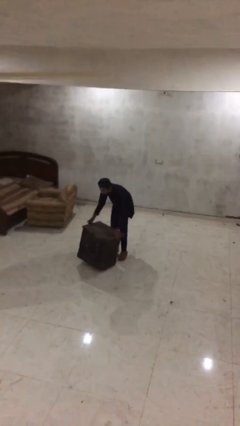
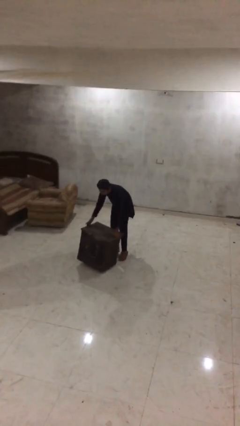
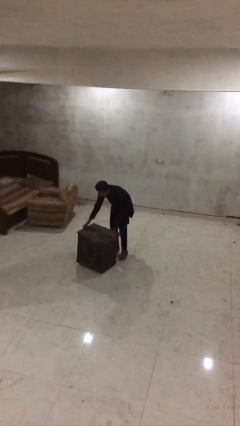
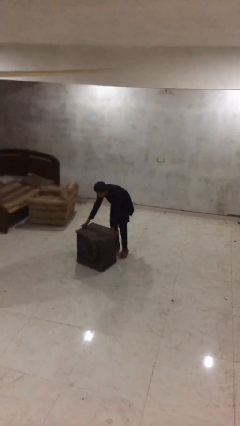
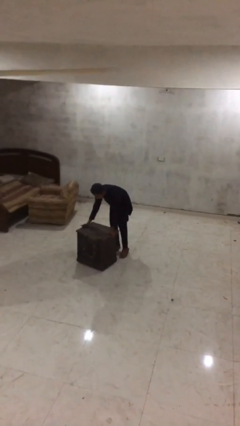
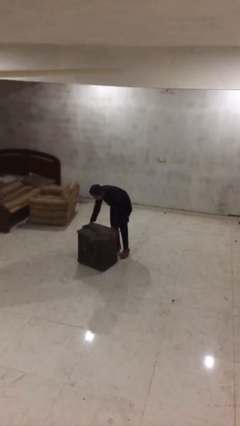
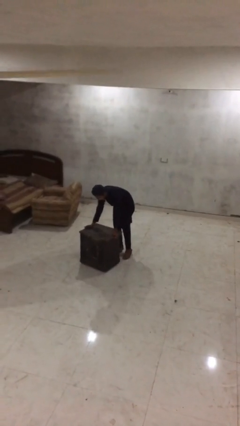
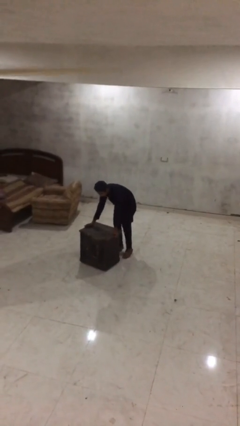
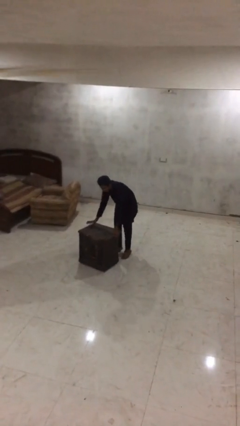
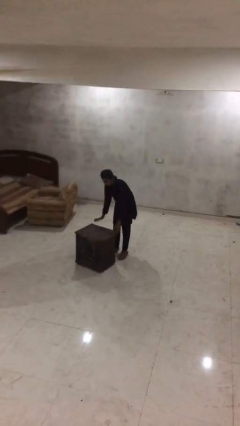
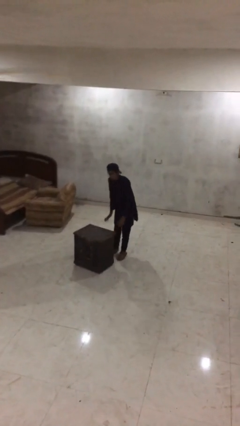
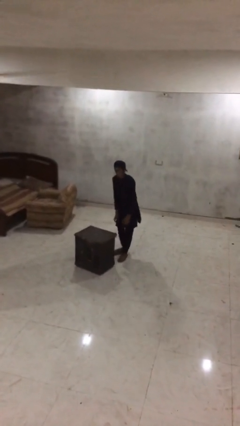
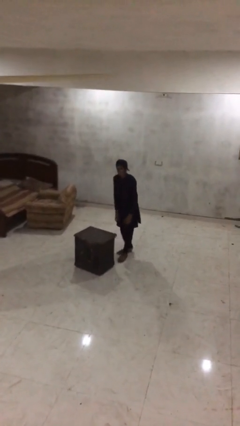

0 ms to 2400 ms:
person puts down object on floor

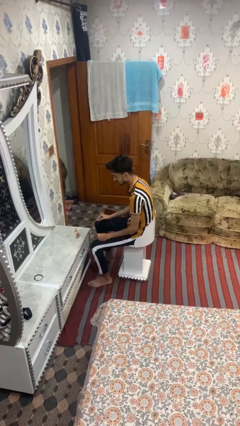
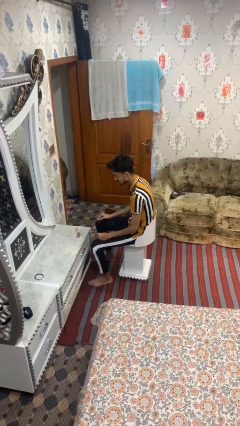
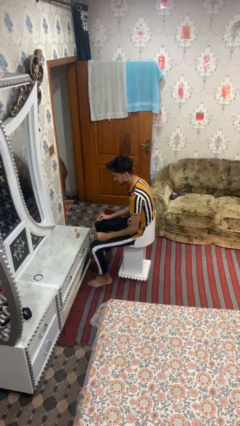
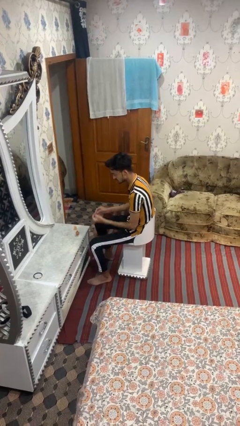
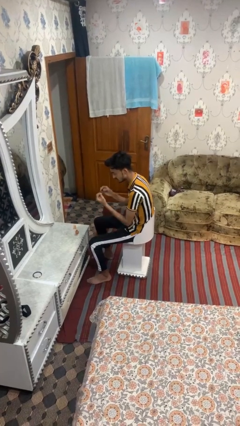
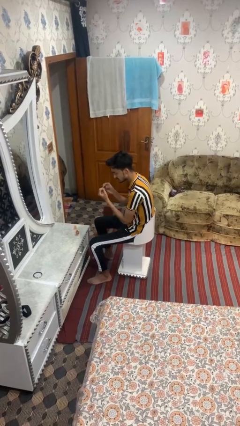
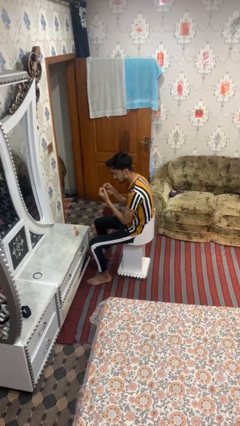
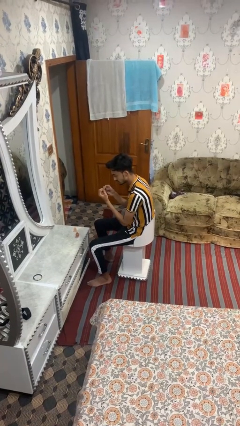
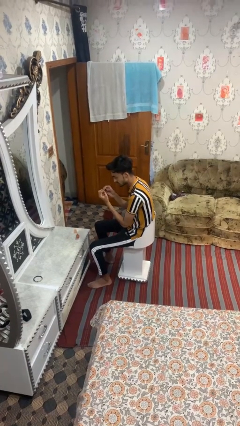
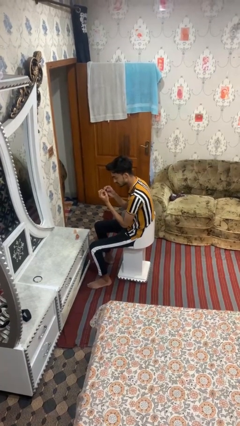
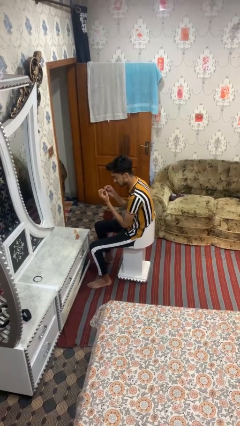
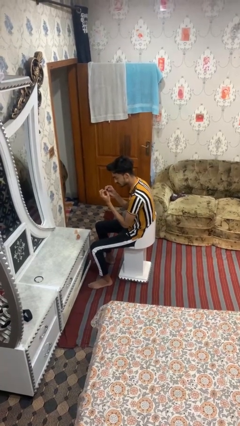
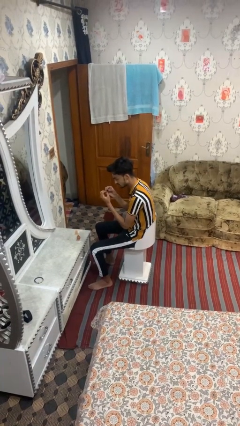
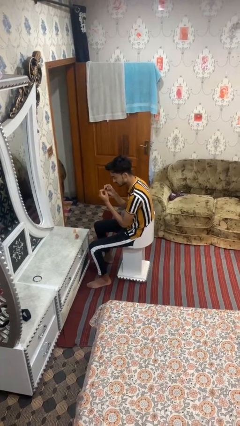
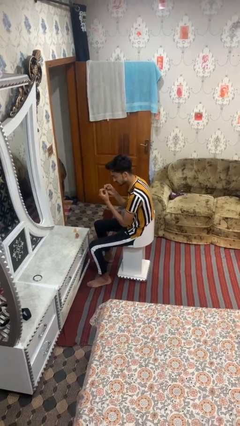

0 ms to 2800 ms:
person paints fingernails

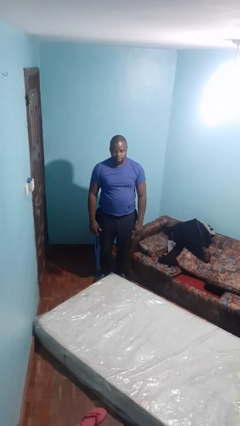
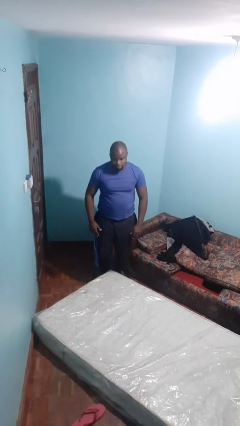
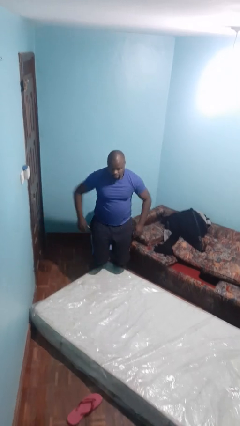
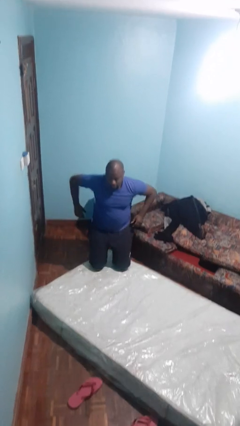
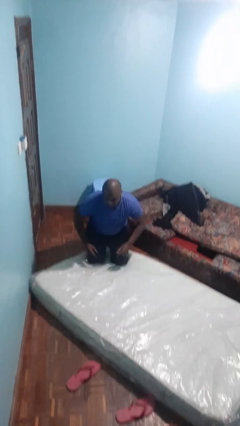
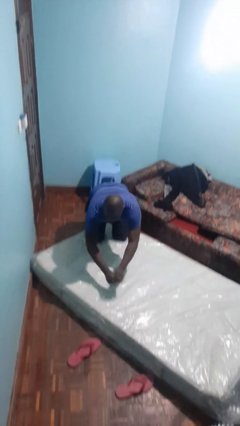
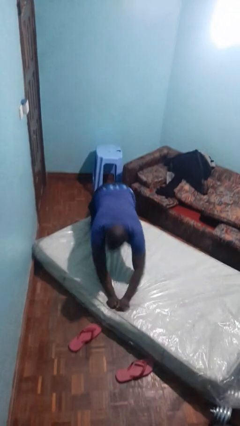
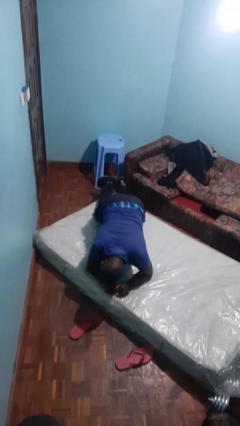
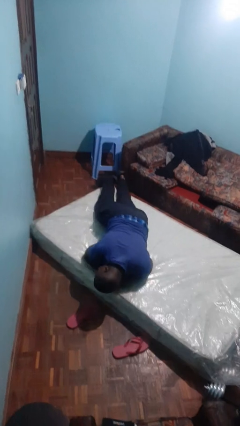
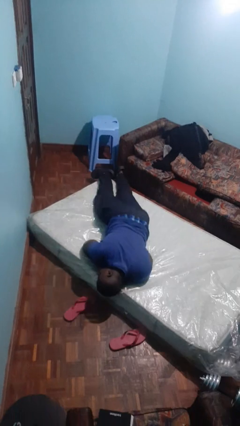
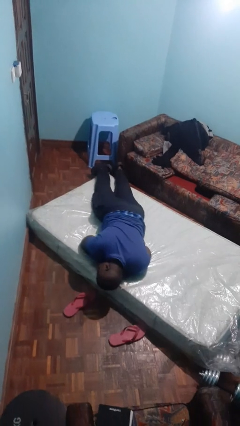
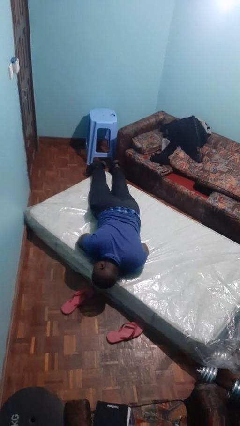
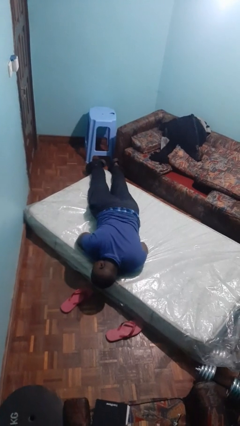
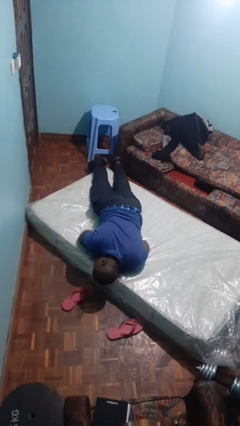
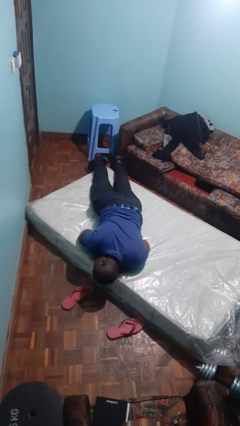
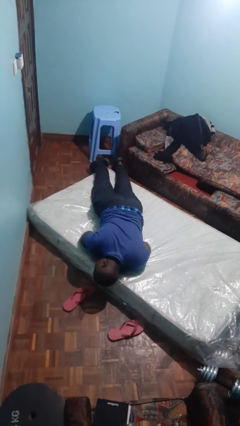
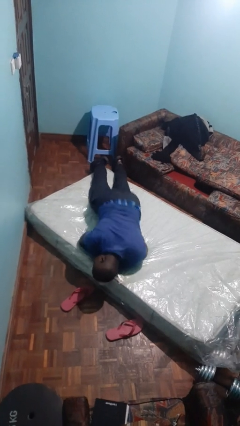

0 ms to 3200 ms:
person lies down on bed

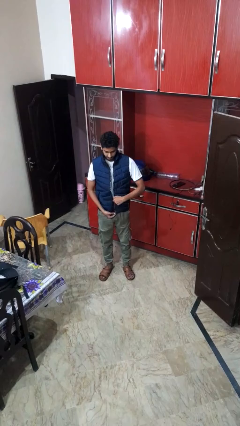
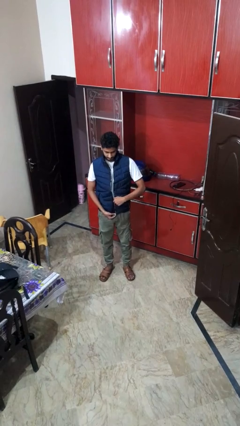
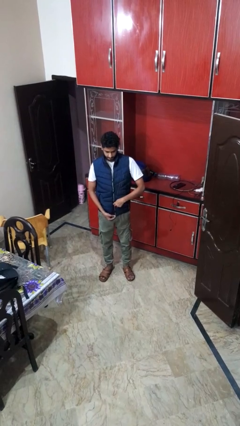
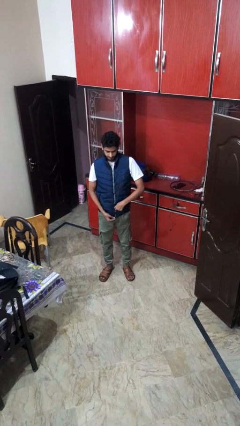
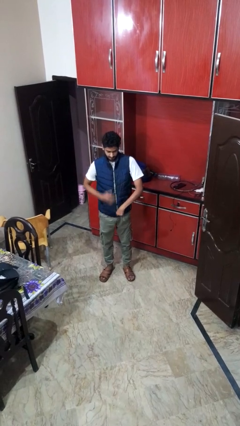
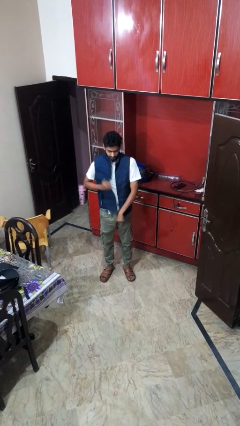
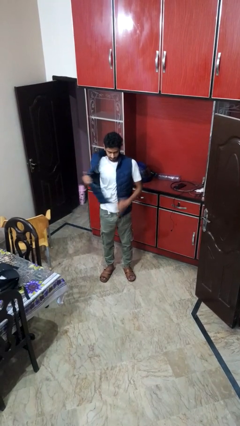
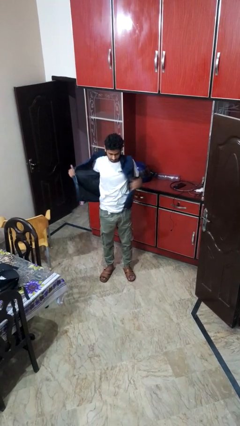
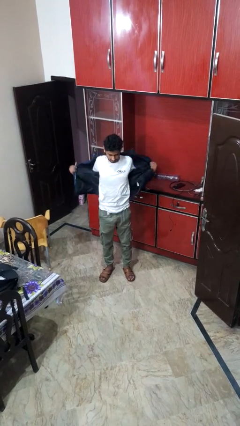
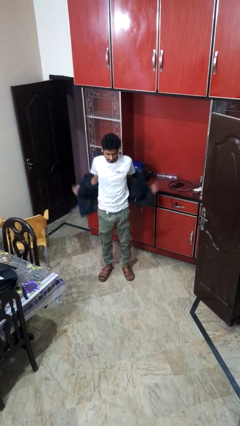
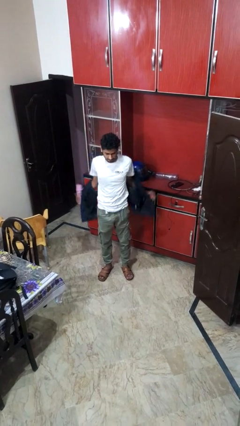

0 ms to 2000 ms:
person unzips jacket

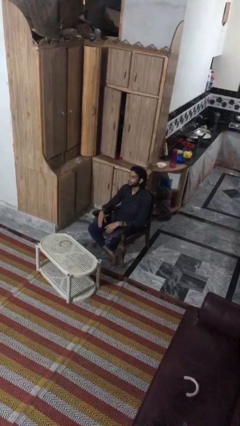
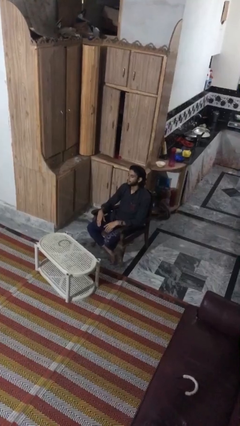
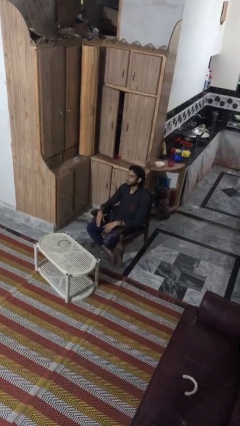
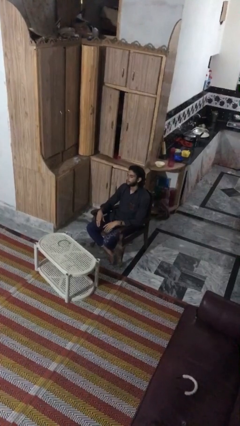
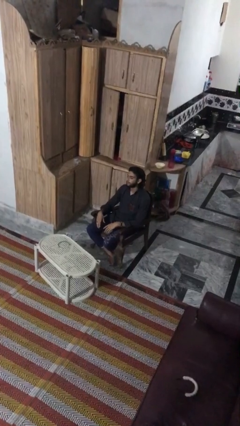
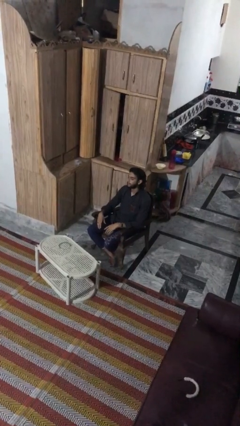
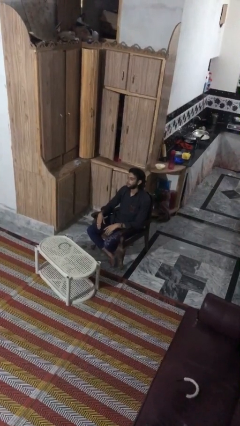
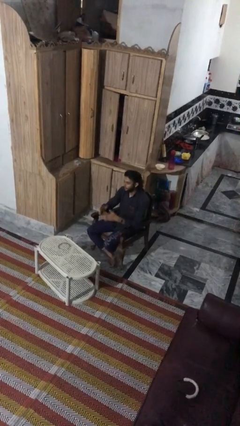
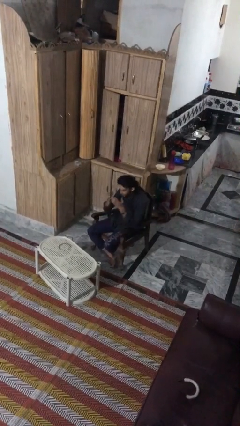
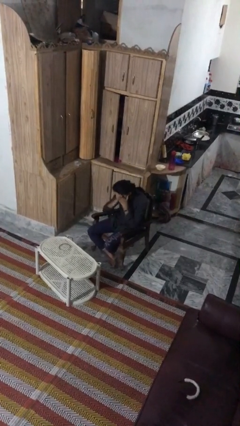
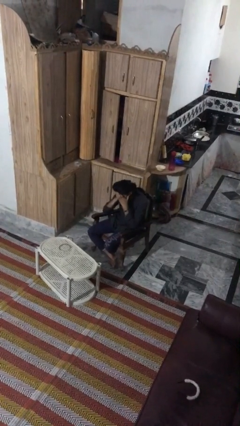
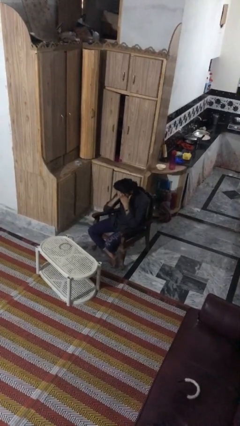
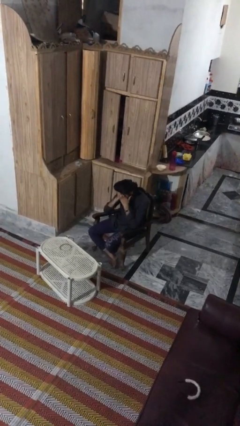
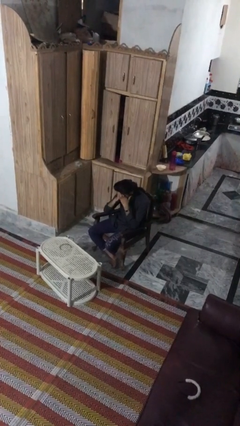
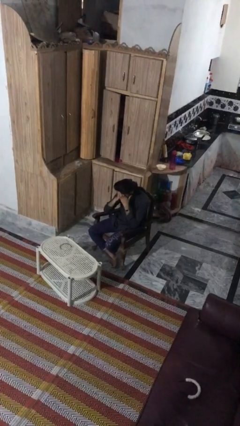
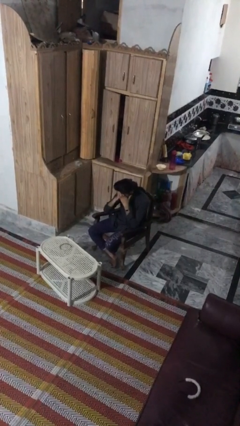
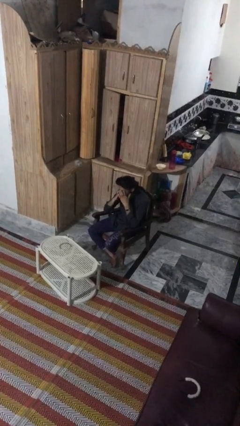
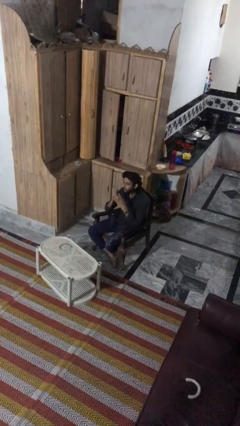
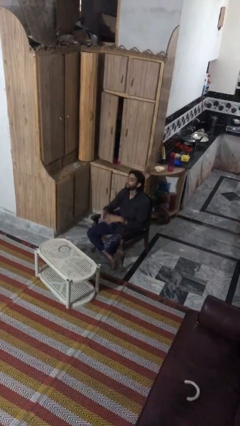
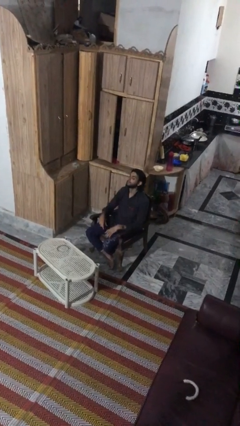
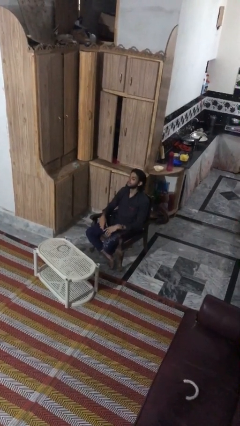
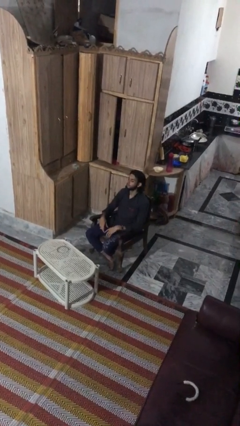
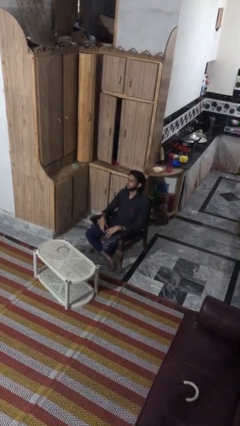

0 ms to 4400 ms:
person covers face with hands

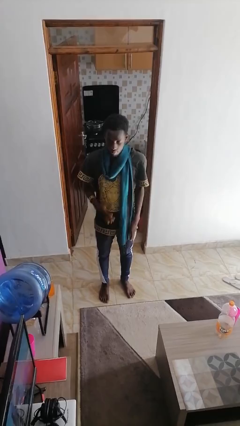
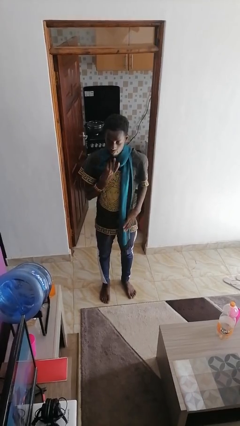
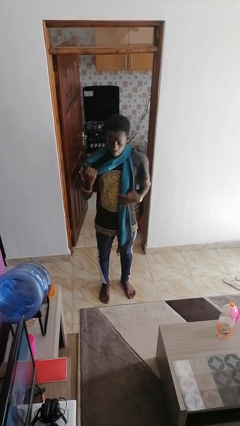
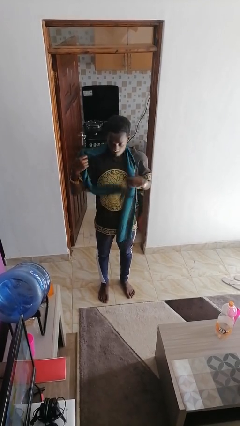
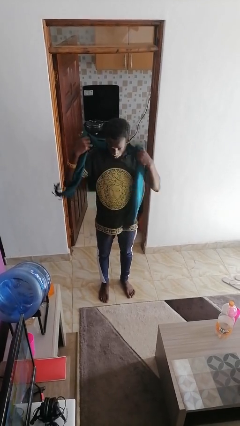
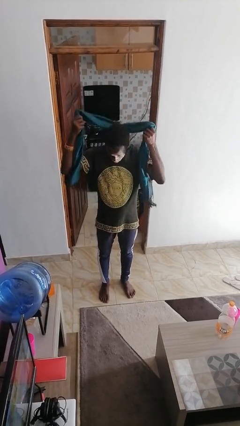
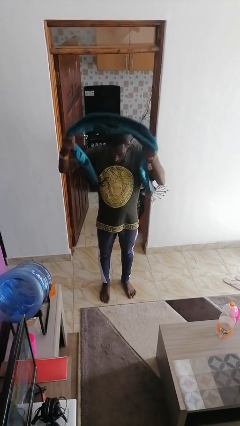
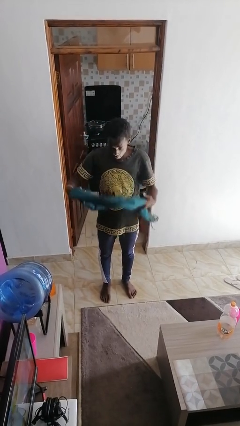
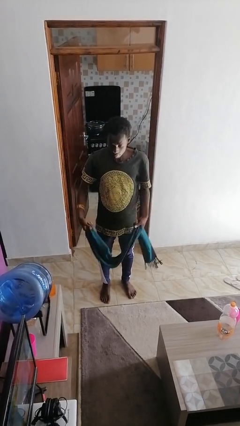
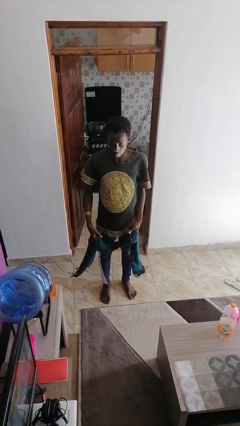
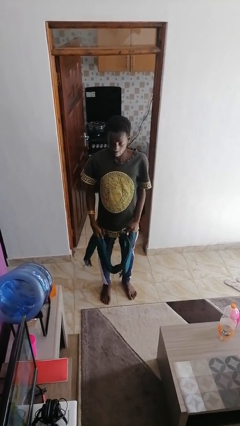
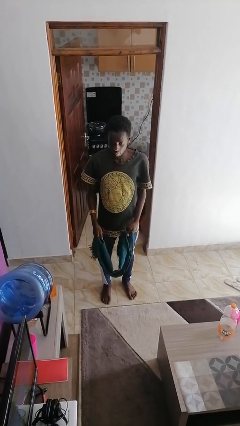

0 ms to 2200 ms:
person takes off scarf

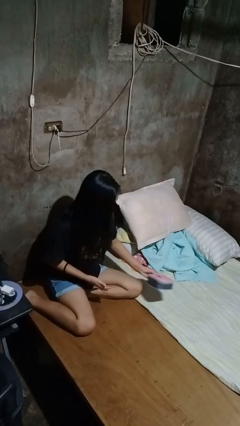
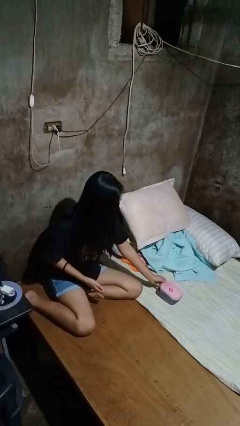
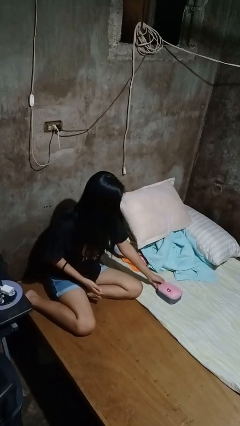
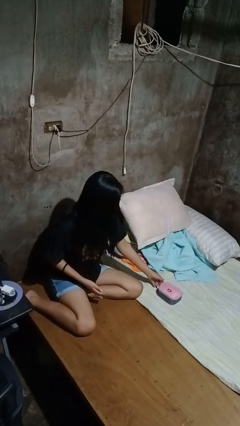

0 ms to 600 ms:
person puts down object on bed
